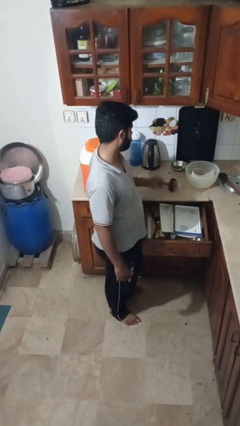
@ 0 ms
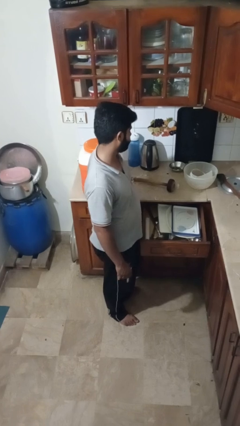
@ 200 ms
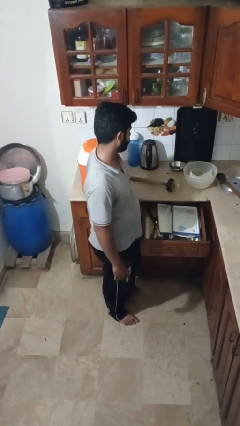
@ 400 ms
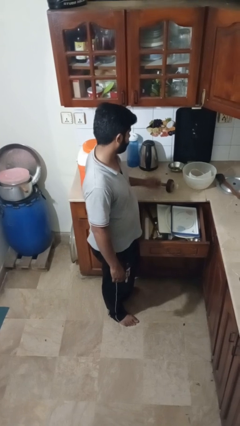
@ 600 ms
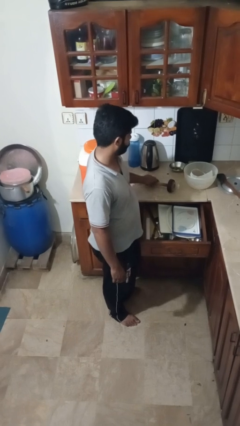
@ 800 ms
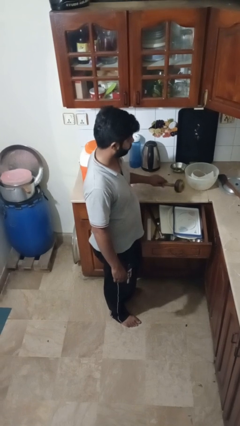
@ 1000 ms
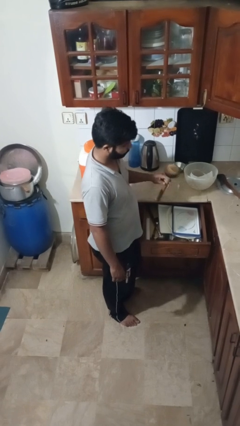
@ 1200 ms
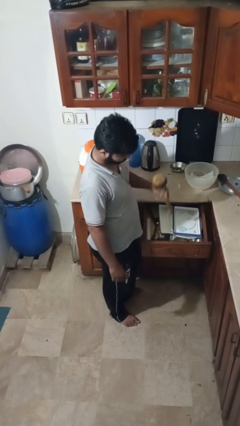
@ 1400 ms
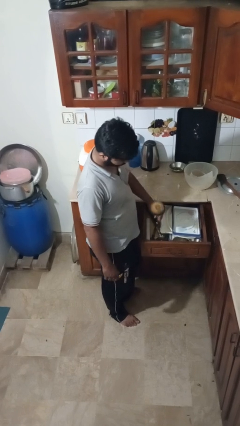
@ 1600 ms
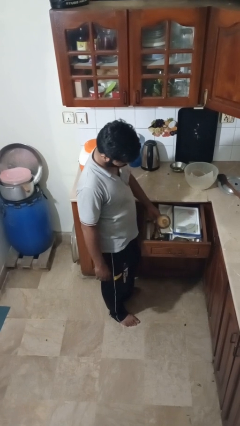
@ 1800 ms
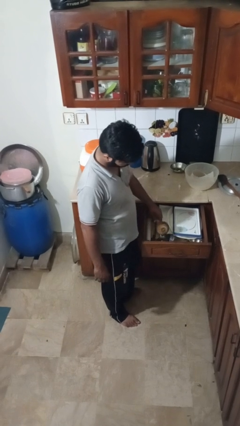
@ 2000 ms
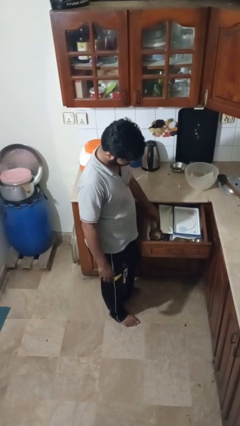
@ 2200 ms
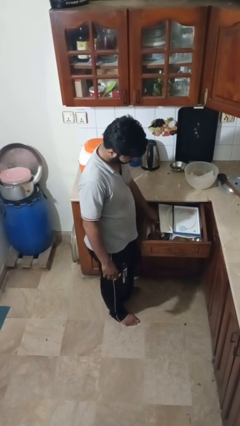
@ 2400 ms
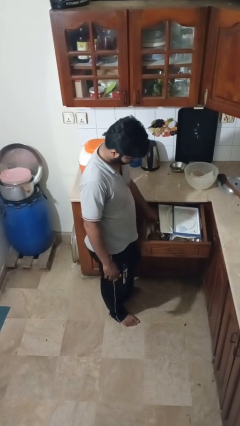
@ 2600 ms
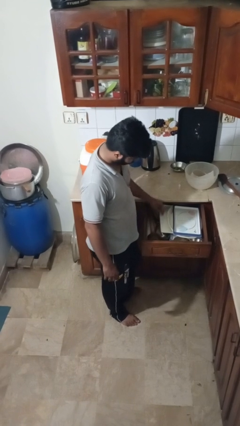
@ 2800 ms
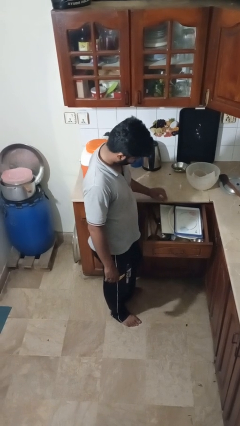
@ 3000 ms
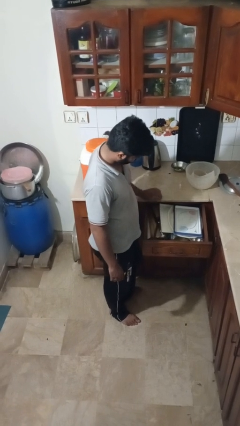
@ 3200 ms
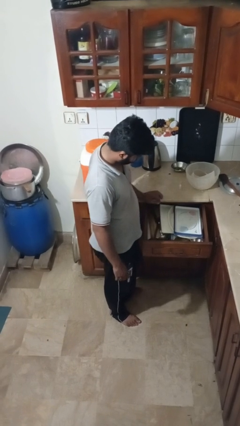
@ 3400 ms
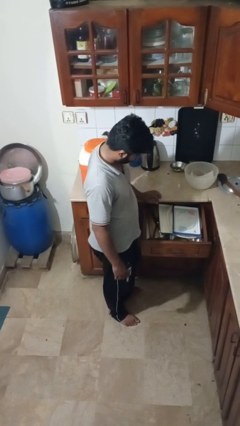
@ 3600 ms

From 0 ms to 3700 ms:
person puts object into kitchen drawer

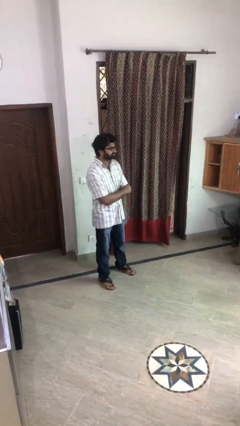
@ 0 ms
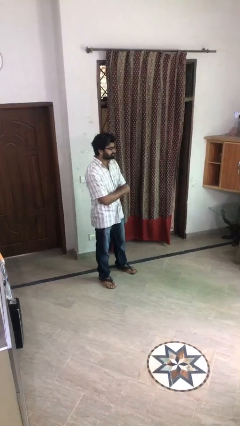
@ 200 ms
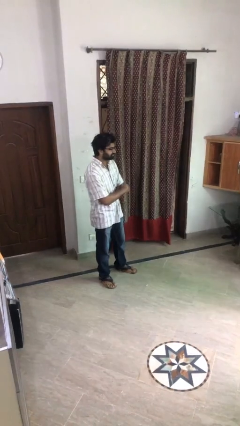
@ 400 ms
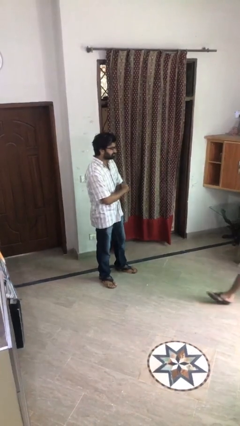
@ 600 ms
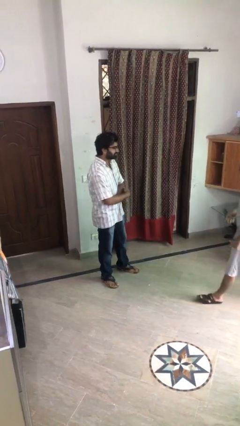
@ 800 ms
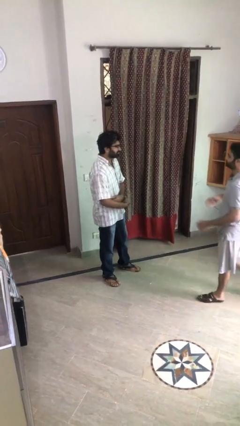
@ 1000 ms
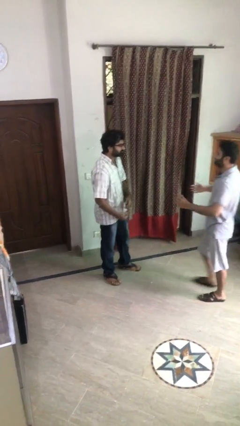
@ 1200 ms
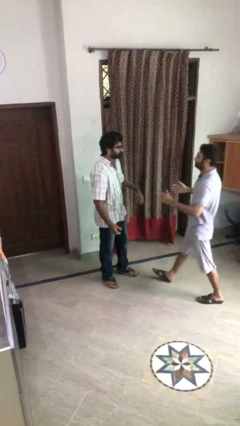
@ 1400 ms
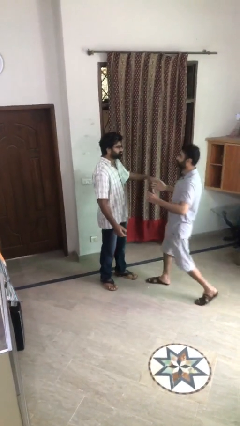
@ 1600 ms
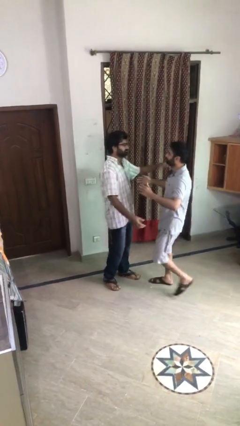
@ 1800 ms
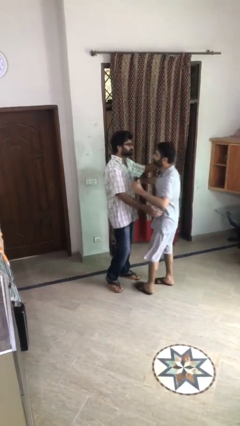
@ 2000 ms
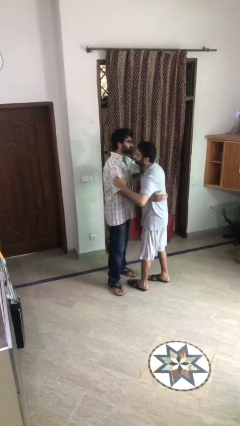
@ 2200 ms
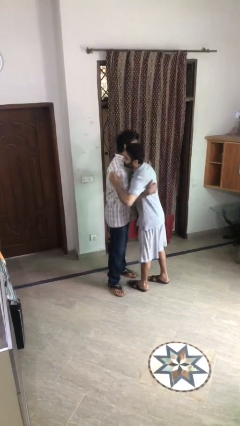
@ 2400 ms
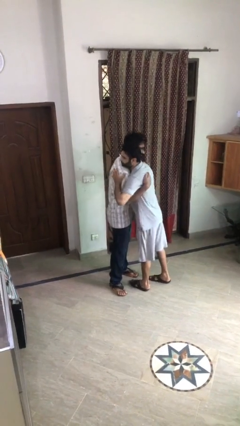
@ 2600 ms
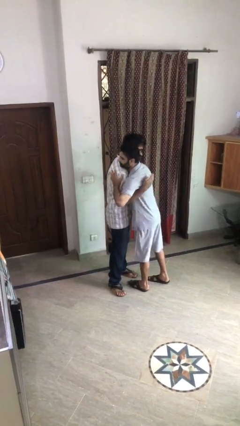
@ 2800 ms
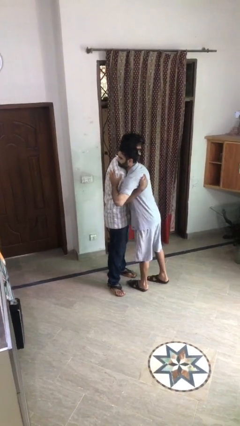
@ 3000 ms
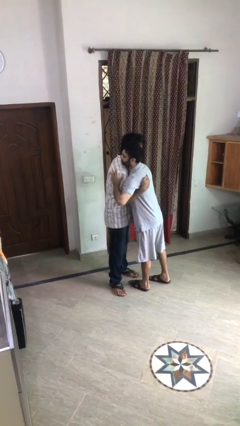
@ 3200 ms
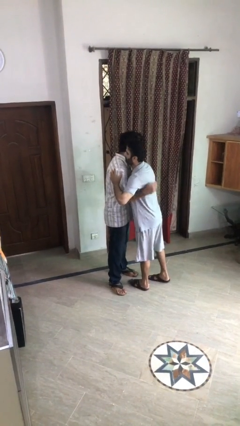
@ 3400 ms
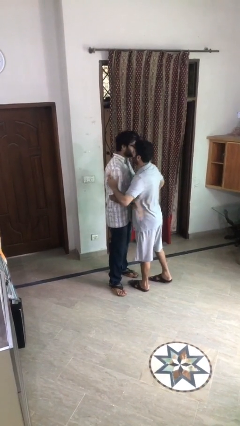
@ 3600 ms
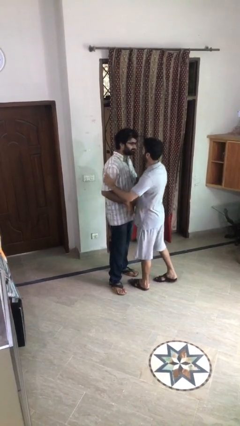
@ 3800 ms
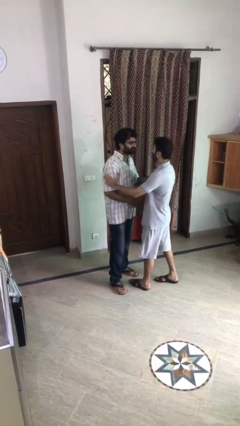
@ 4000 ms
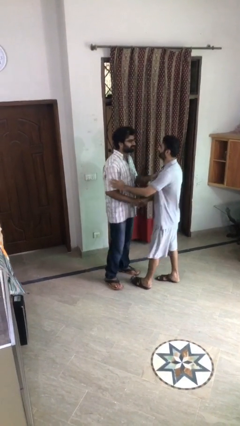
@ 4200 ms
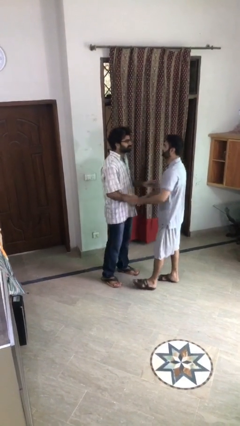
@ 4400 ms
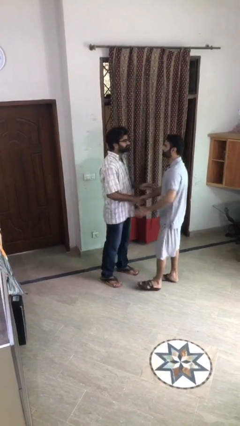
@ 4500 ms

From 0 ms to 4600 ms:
person embraces person

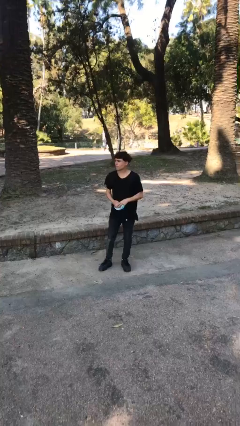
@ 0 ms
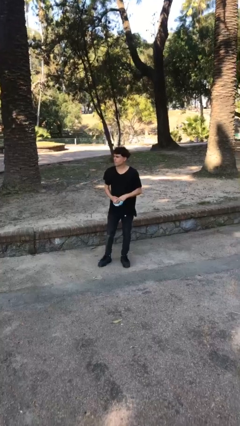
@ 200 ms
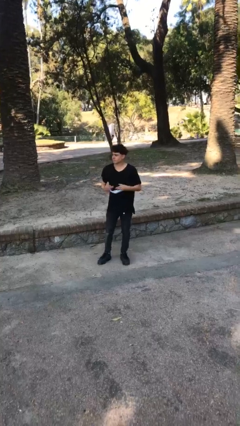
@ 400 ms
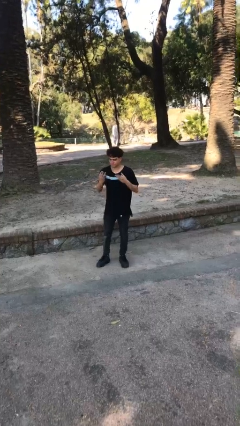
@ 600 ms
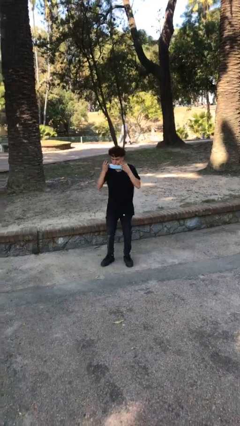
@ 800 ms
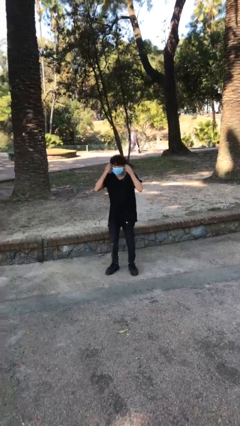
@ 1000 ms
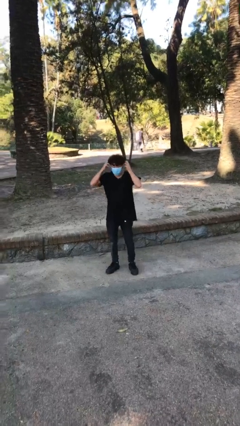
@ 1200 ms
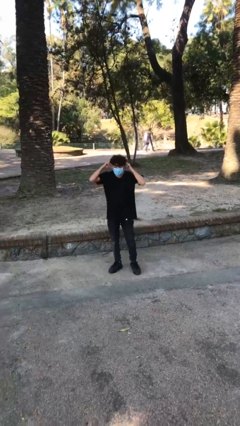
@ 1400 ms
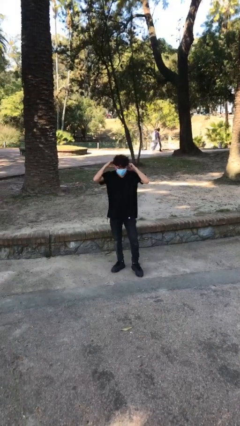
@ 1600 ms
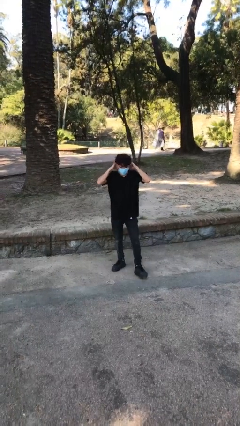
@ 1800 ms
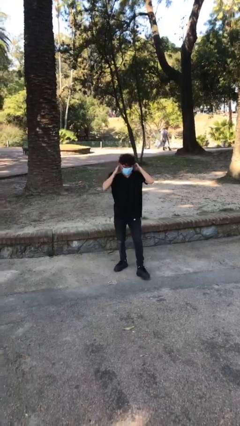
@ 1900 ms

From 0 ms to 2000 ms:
person puts on facemask

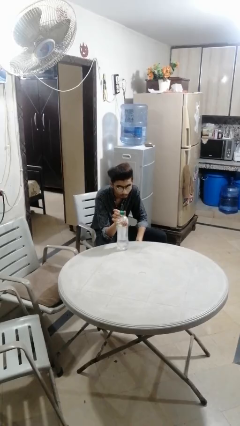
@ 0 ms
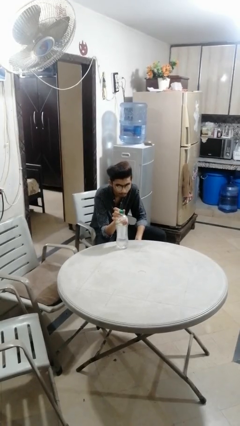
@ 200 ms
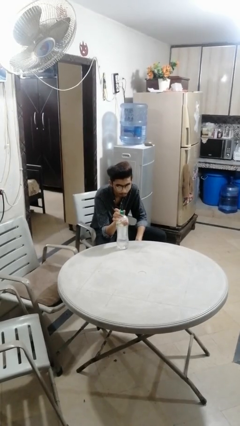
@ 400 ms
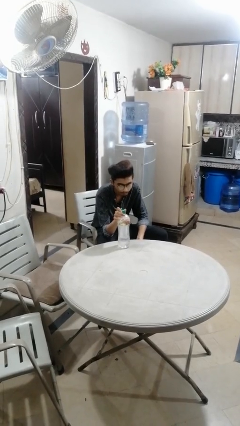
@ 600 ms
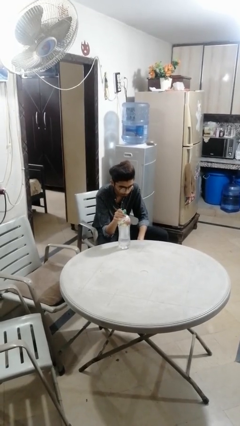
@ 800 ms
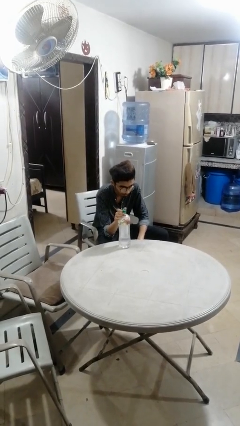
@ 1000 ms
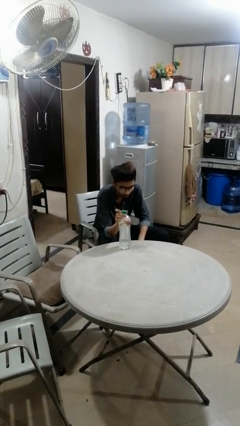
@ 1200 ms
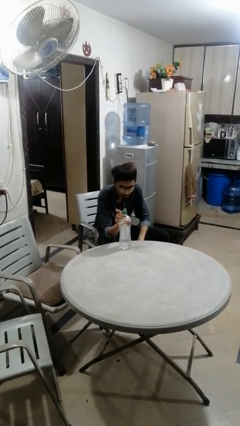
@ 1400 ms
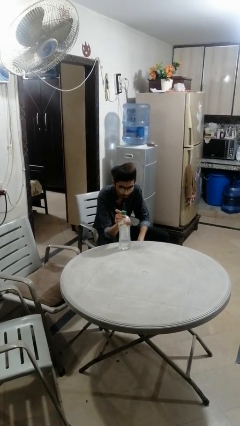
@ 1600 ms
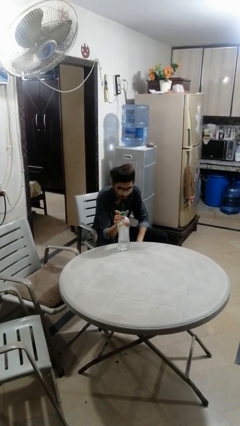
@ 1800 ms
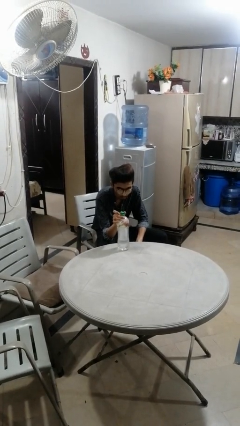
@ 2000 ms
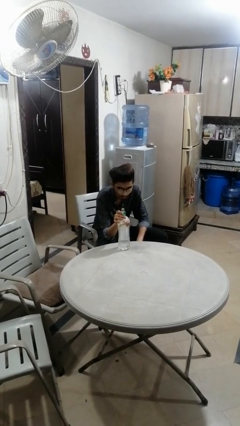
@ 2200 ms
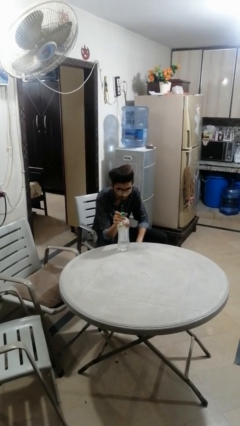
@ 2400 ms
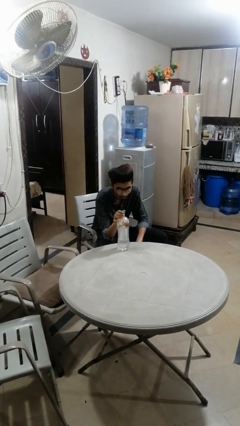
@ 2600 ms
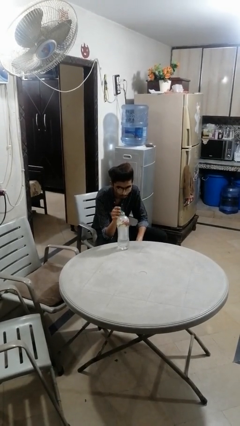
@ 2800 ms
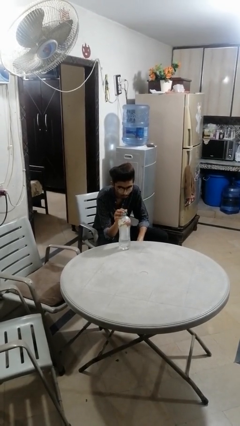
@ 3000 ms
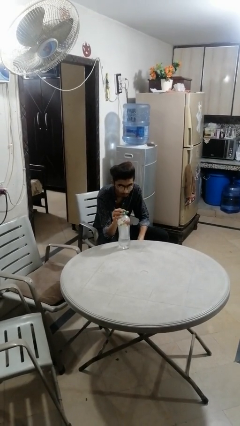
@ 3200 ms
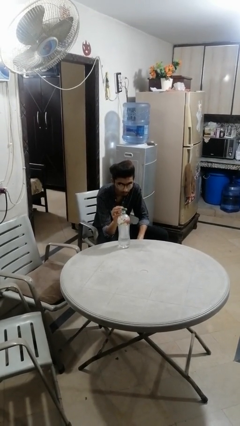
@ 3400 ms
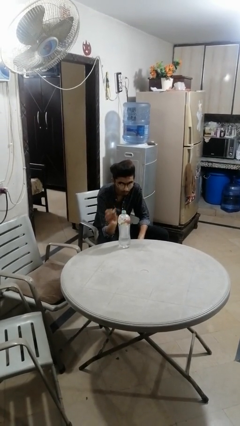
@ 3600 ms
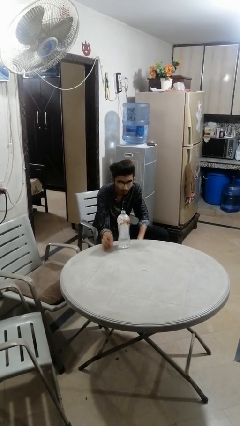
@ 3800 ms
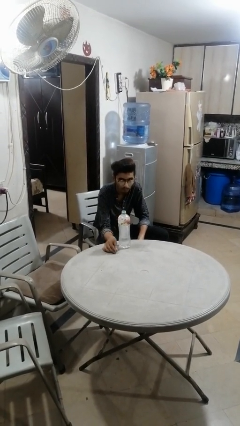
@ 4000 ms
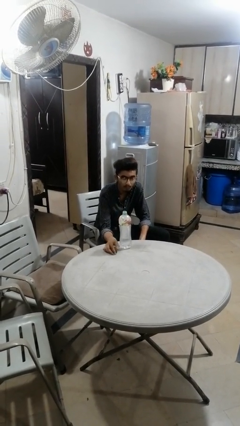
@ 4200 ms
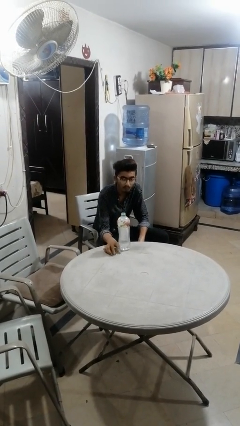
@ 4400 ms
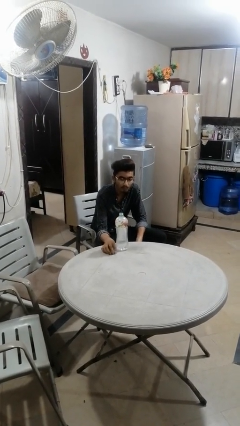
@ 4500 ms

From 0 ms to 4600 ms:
person unscrews lid from bottle

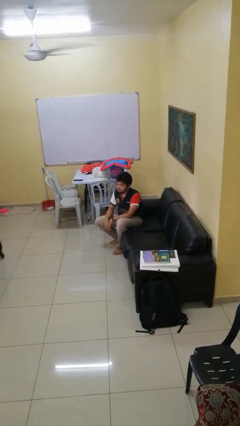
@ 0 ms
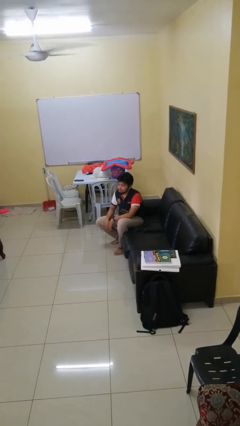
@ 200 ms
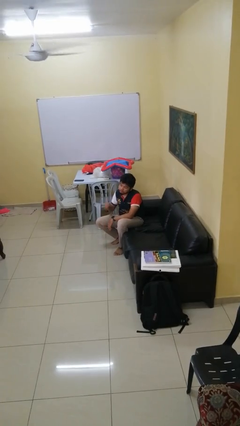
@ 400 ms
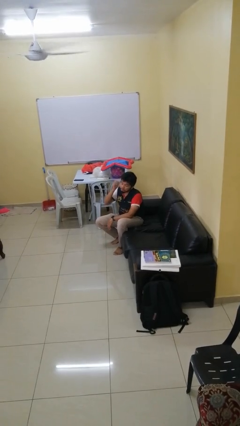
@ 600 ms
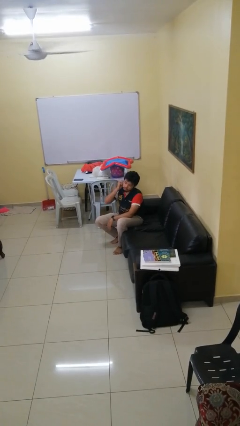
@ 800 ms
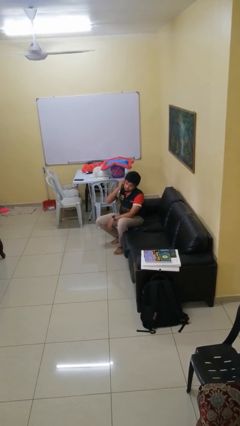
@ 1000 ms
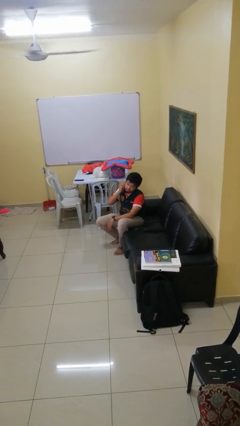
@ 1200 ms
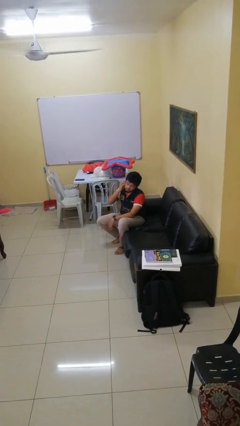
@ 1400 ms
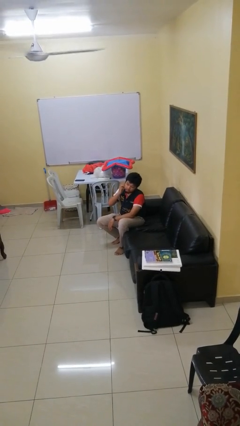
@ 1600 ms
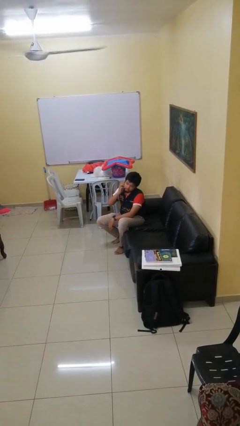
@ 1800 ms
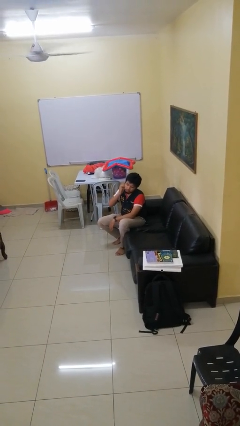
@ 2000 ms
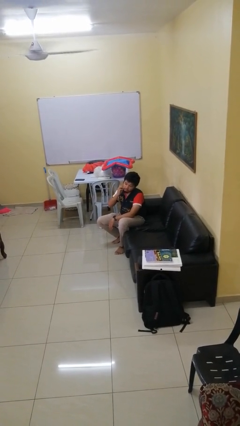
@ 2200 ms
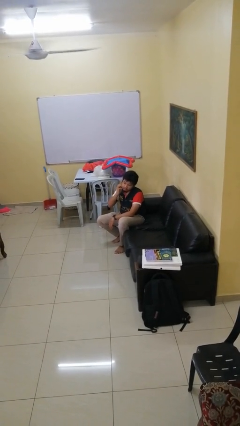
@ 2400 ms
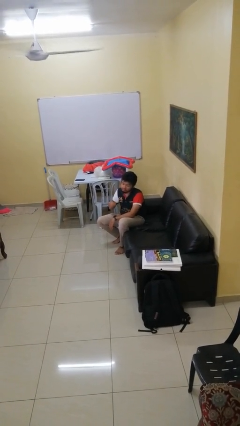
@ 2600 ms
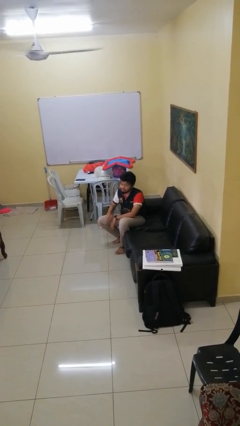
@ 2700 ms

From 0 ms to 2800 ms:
person scratches face
